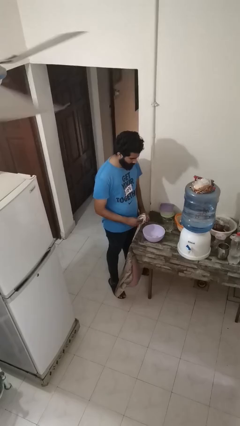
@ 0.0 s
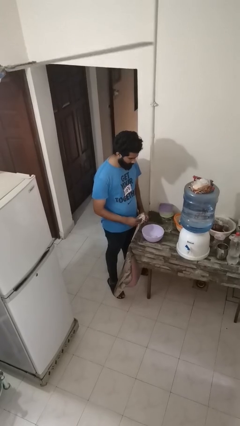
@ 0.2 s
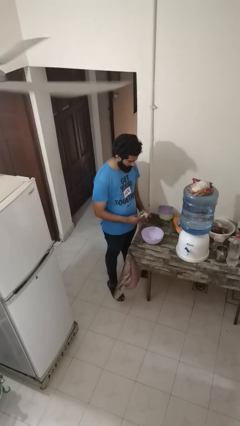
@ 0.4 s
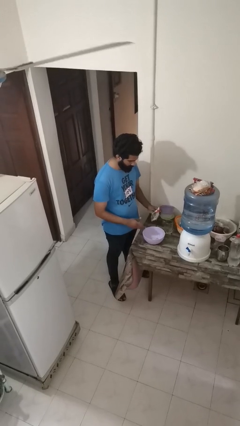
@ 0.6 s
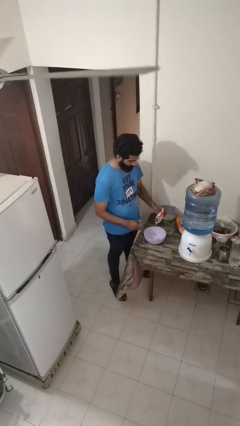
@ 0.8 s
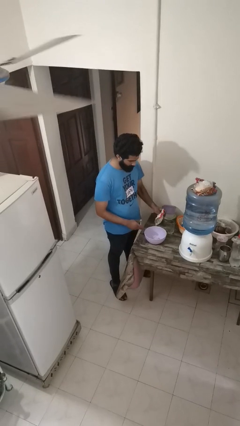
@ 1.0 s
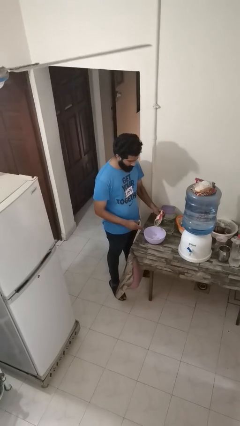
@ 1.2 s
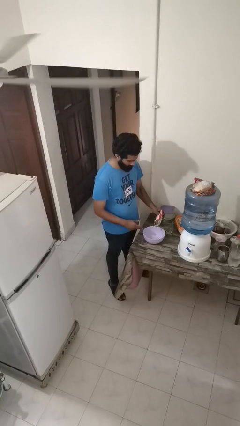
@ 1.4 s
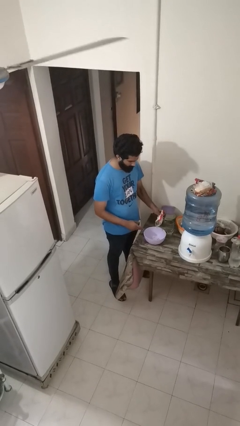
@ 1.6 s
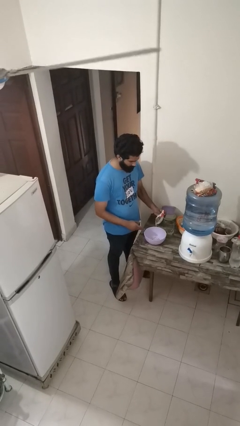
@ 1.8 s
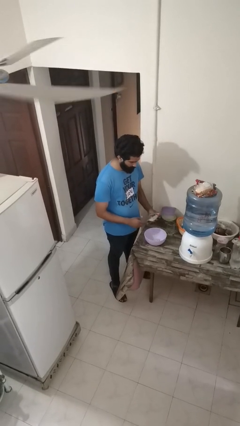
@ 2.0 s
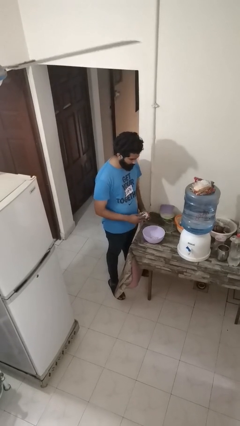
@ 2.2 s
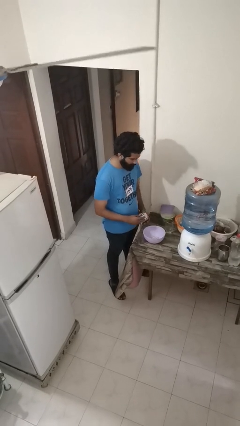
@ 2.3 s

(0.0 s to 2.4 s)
person pours into bowl

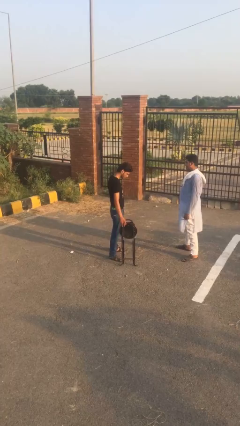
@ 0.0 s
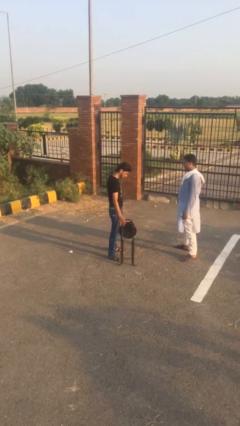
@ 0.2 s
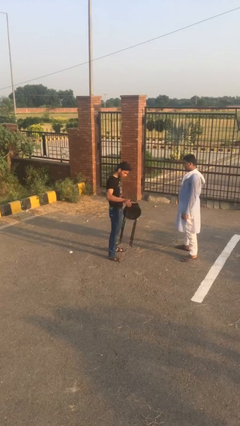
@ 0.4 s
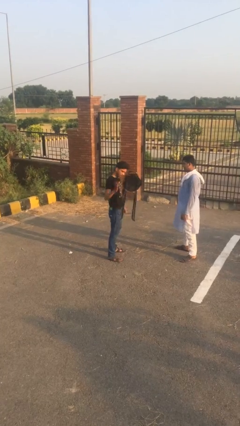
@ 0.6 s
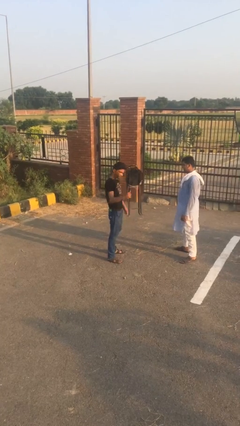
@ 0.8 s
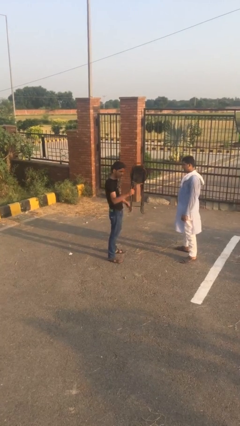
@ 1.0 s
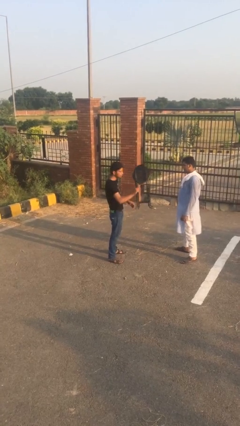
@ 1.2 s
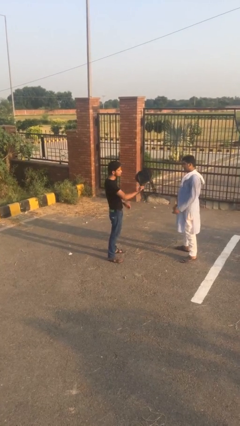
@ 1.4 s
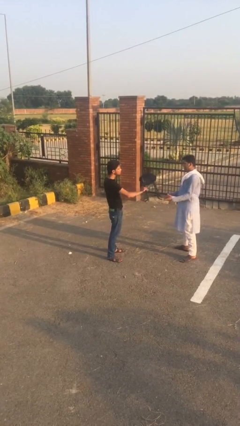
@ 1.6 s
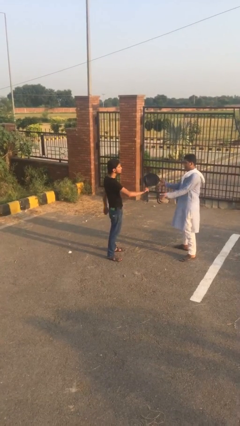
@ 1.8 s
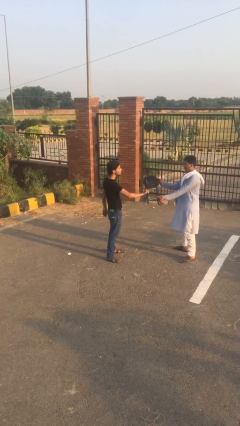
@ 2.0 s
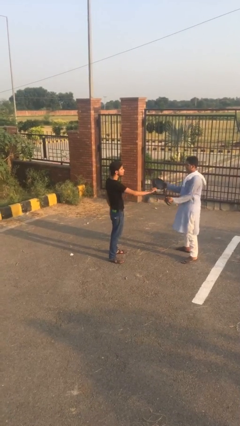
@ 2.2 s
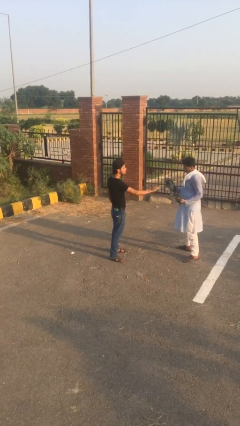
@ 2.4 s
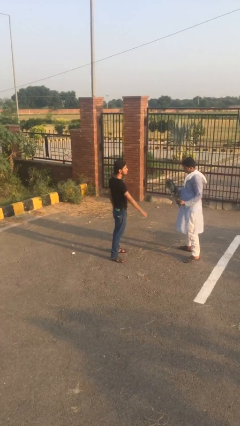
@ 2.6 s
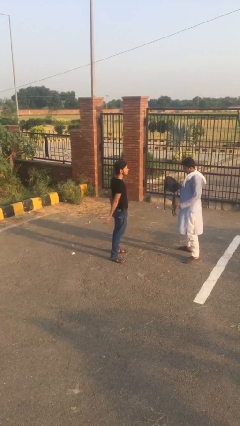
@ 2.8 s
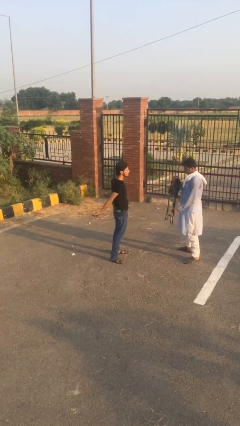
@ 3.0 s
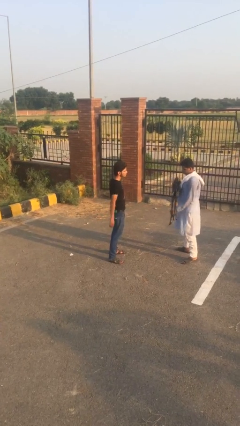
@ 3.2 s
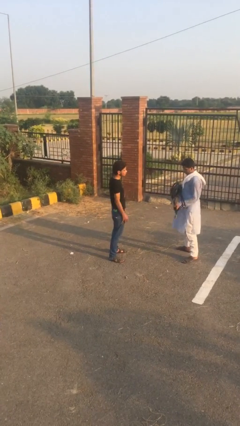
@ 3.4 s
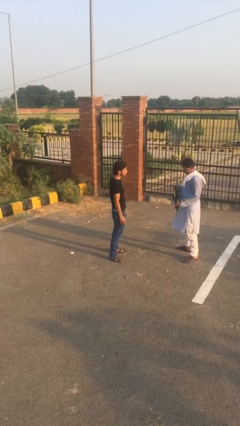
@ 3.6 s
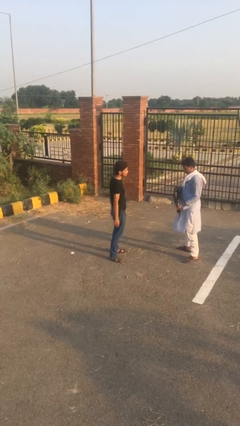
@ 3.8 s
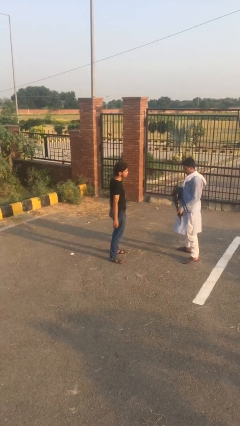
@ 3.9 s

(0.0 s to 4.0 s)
person transfers object to person

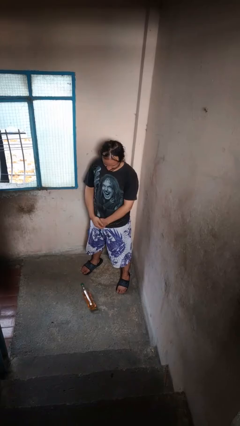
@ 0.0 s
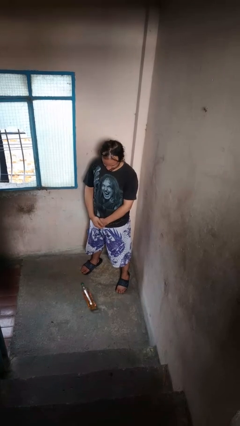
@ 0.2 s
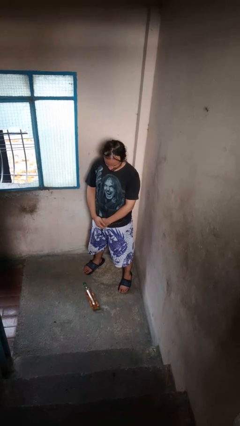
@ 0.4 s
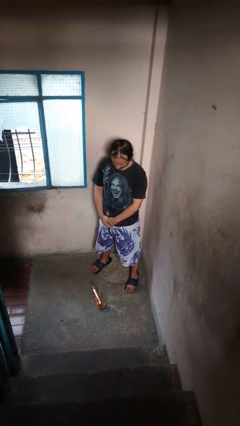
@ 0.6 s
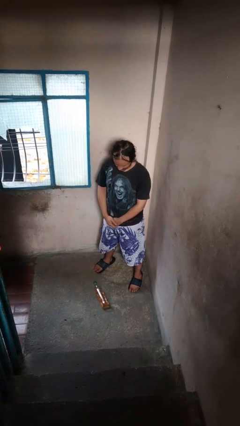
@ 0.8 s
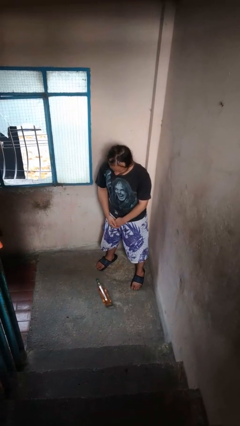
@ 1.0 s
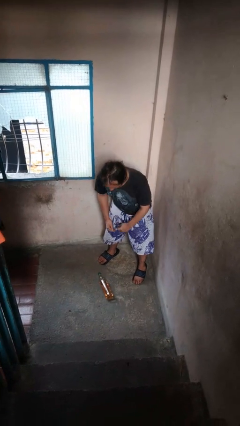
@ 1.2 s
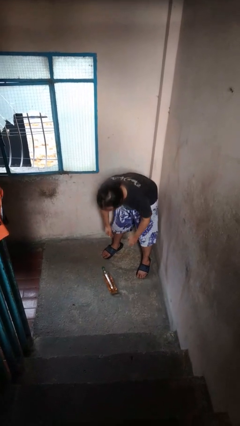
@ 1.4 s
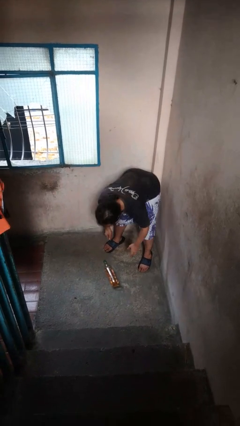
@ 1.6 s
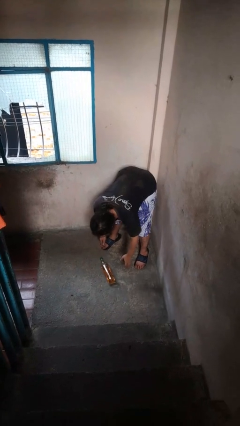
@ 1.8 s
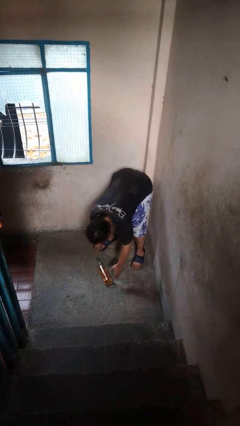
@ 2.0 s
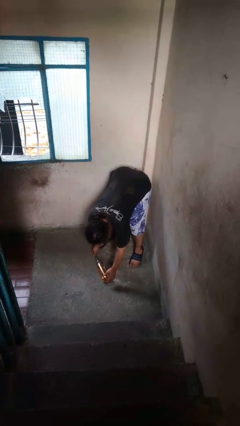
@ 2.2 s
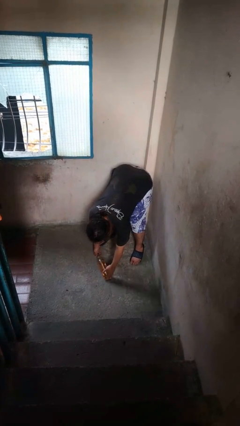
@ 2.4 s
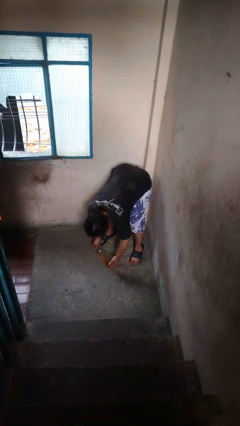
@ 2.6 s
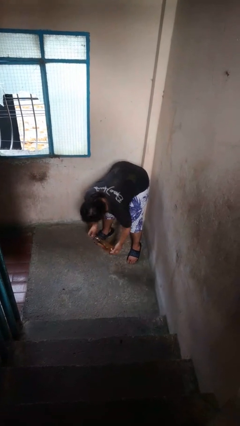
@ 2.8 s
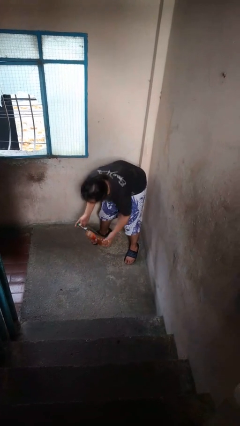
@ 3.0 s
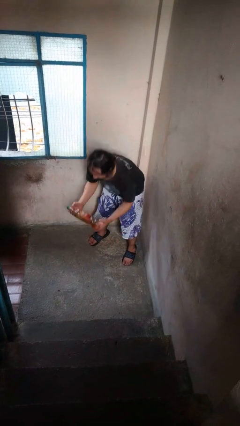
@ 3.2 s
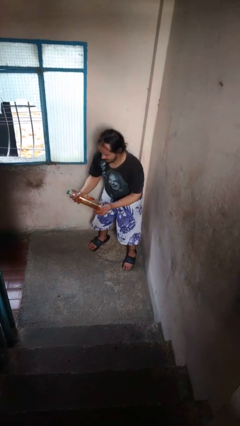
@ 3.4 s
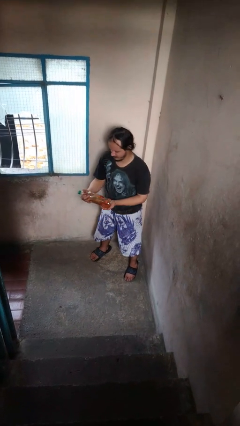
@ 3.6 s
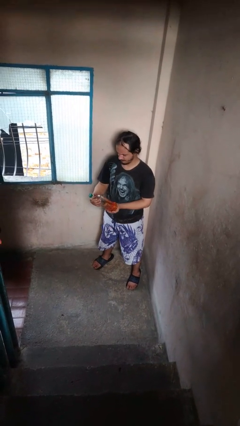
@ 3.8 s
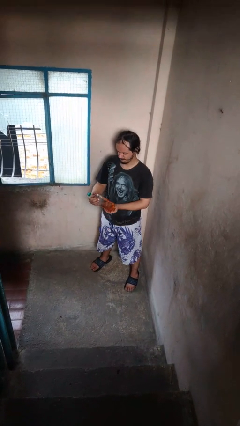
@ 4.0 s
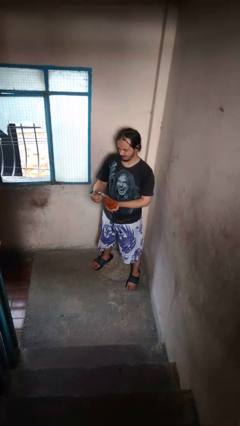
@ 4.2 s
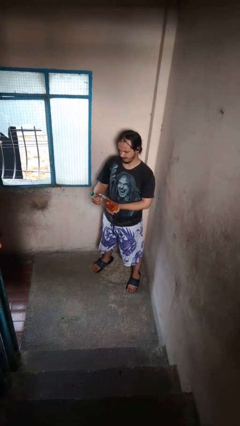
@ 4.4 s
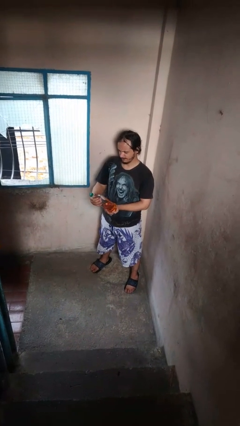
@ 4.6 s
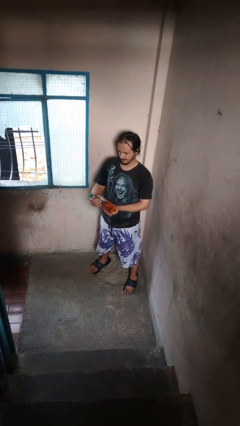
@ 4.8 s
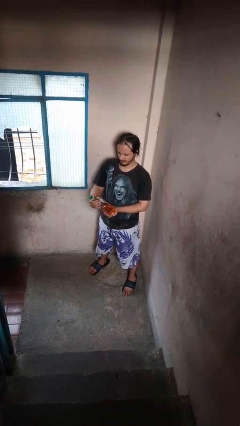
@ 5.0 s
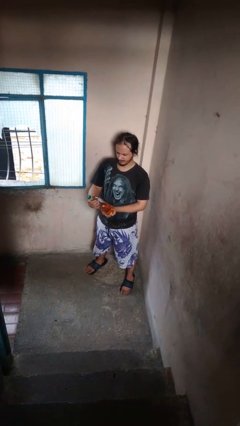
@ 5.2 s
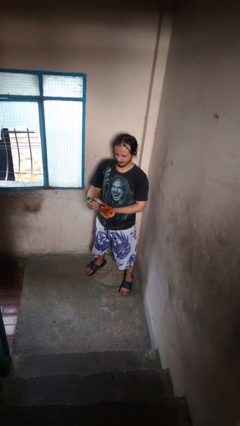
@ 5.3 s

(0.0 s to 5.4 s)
person picks up object from floor

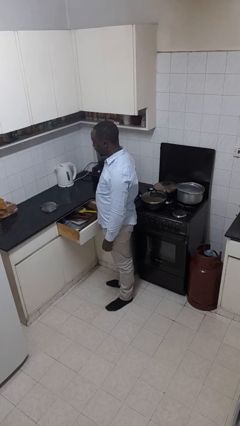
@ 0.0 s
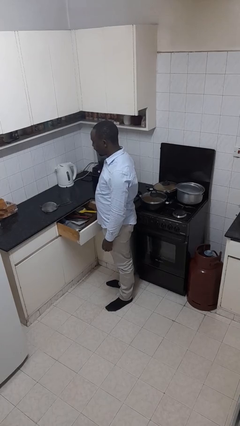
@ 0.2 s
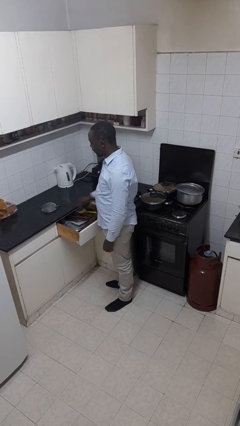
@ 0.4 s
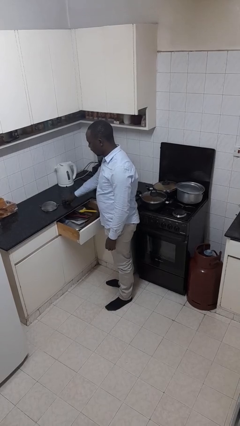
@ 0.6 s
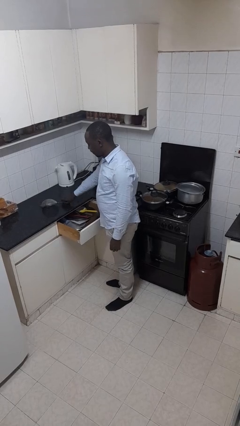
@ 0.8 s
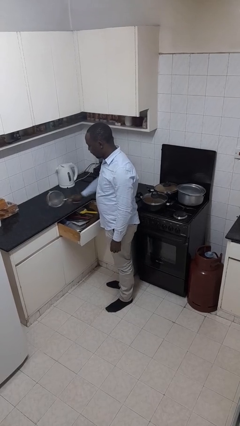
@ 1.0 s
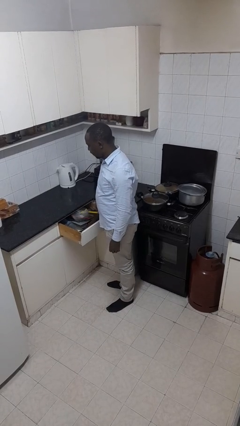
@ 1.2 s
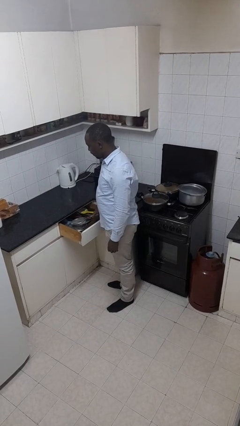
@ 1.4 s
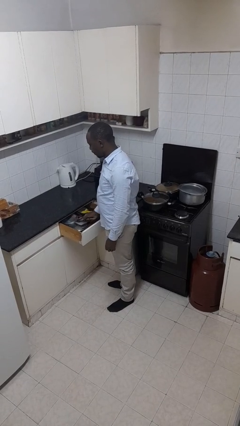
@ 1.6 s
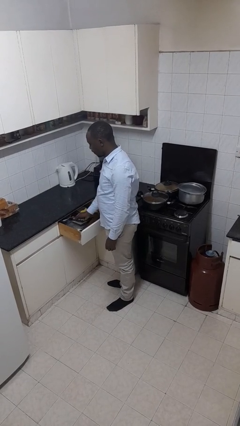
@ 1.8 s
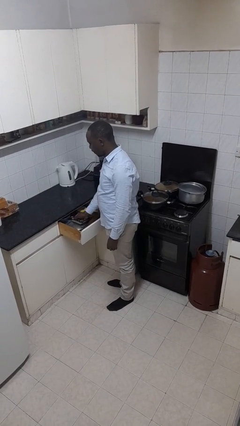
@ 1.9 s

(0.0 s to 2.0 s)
person puts object into kitchen drawer

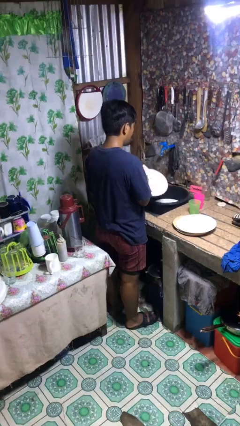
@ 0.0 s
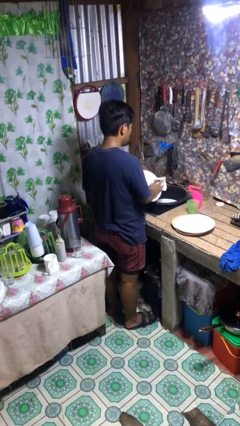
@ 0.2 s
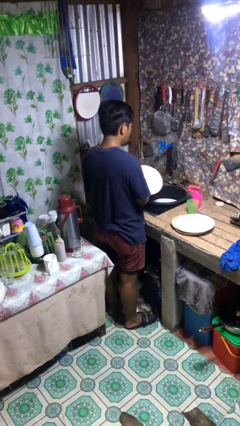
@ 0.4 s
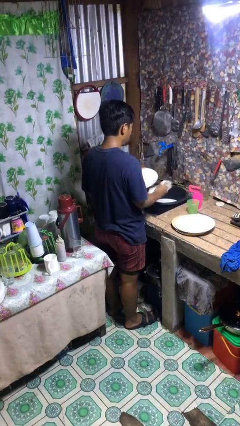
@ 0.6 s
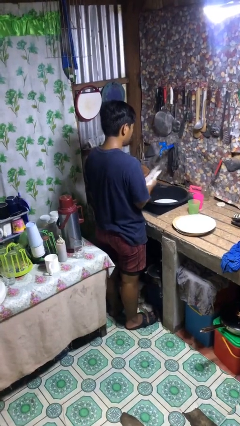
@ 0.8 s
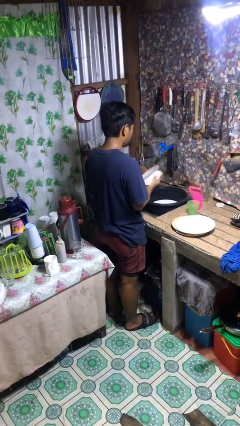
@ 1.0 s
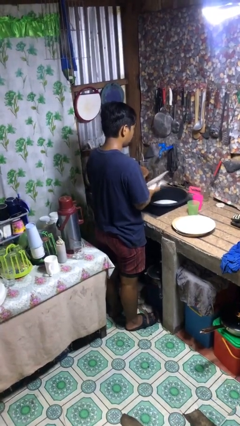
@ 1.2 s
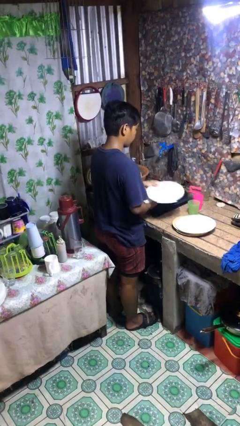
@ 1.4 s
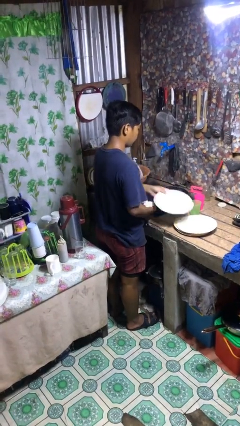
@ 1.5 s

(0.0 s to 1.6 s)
person dries dish

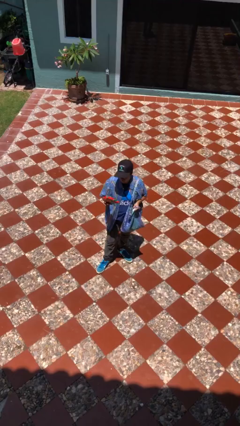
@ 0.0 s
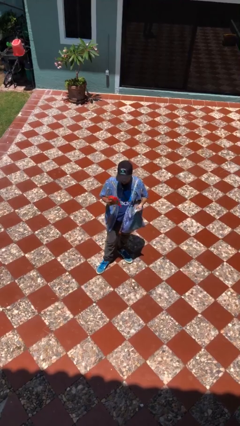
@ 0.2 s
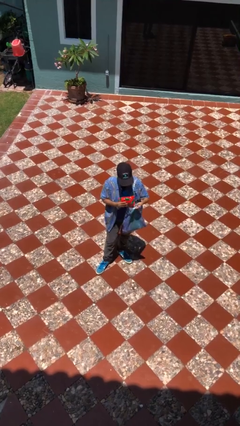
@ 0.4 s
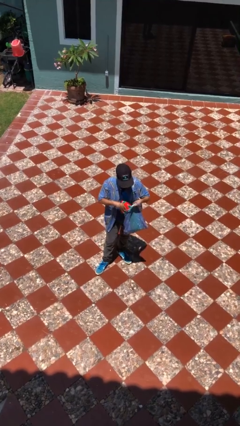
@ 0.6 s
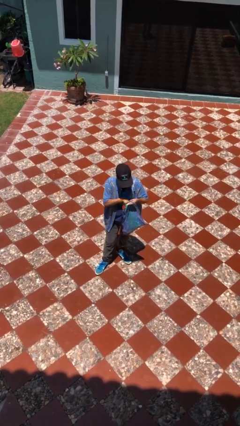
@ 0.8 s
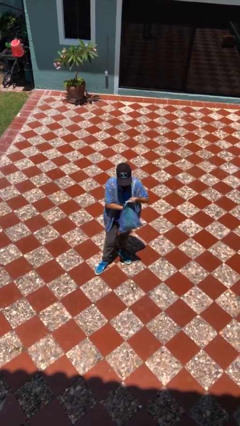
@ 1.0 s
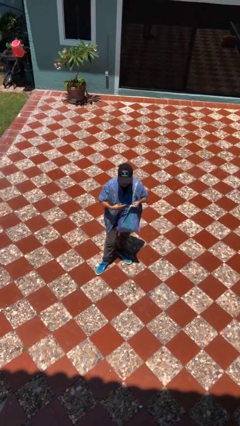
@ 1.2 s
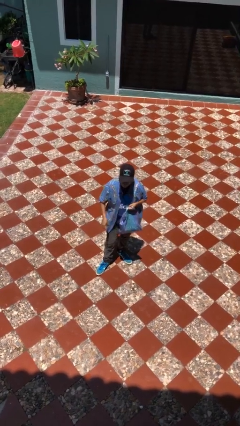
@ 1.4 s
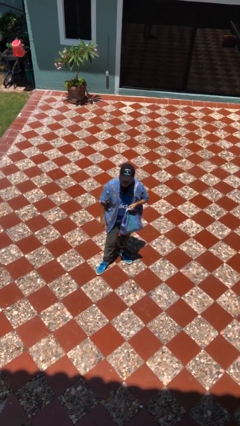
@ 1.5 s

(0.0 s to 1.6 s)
person puts object into purse

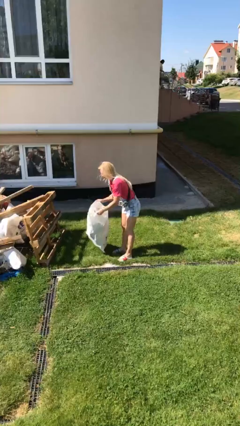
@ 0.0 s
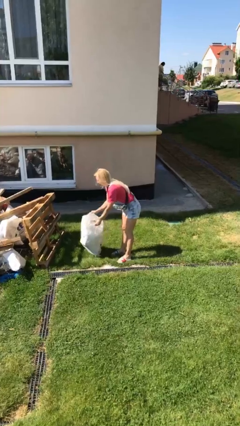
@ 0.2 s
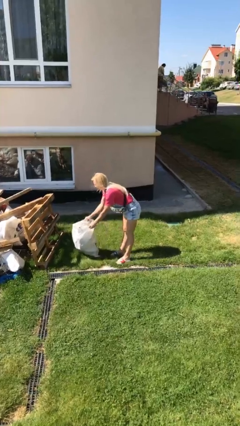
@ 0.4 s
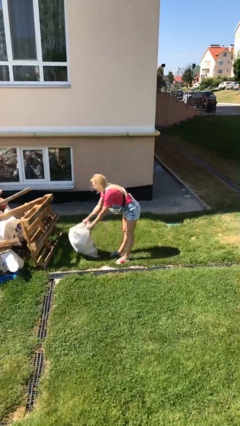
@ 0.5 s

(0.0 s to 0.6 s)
person puts down object on floor
